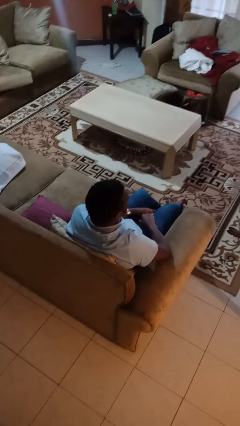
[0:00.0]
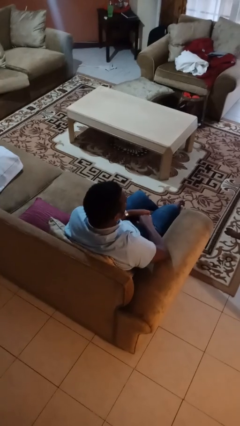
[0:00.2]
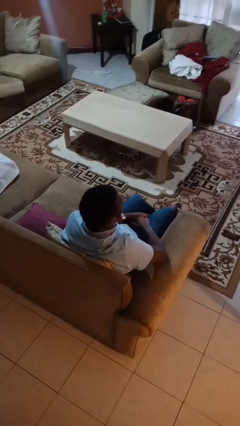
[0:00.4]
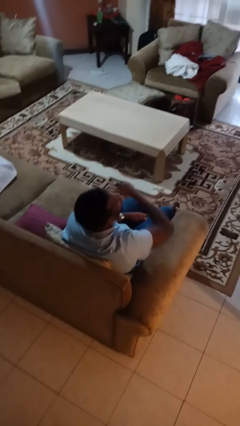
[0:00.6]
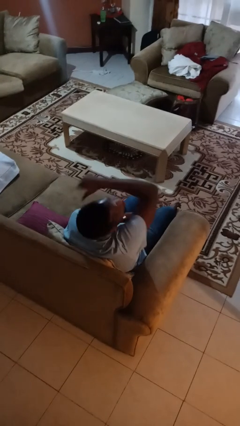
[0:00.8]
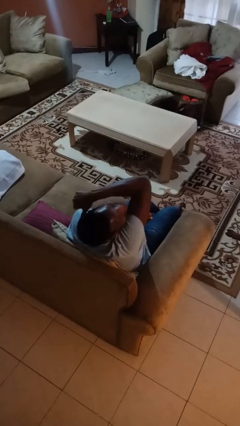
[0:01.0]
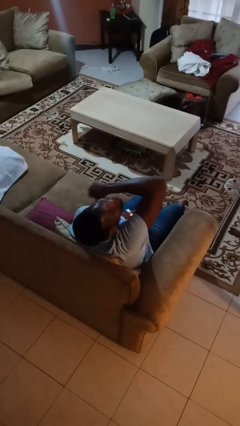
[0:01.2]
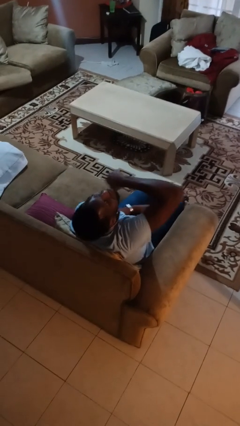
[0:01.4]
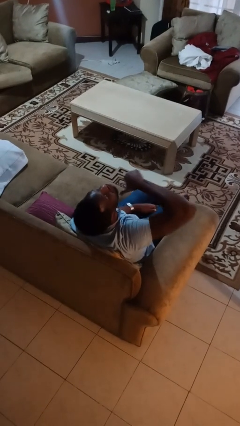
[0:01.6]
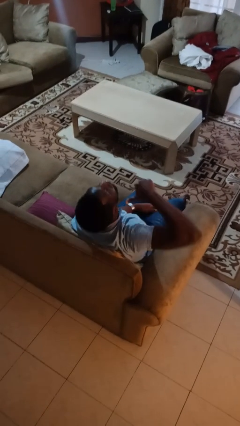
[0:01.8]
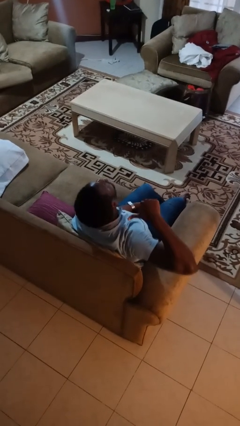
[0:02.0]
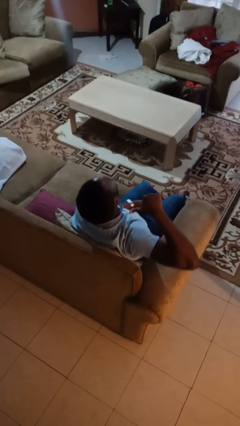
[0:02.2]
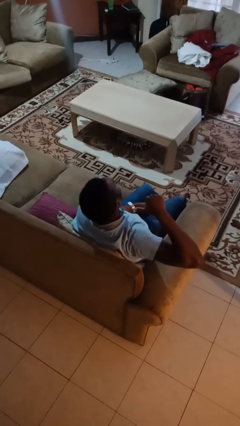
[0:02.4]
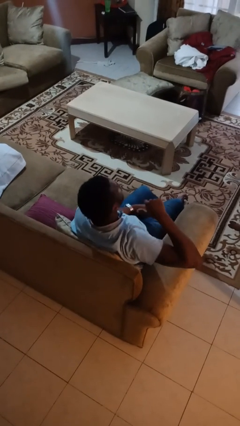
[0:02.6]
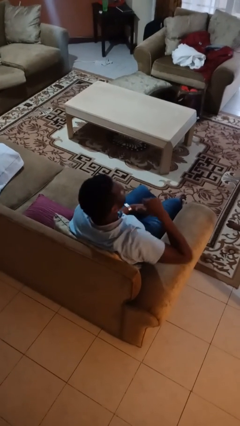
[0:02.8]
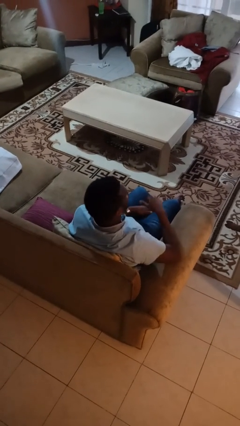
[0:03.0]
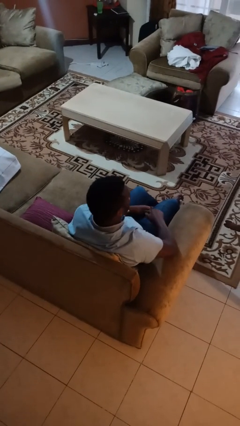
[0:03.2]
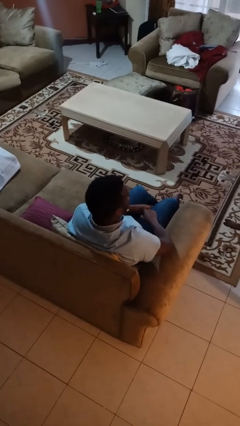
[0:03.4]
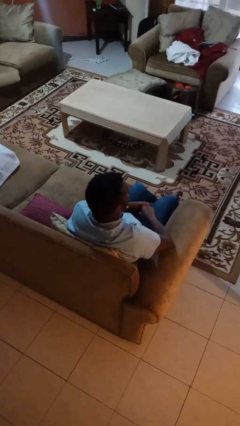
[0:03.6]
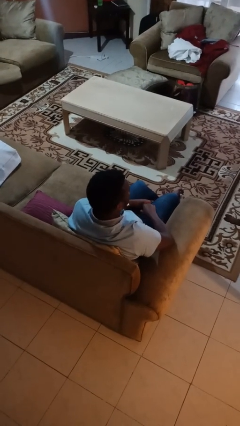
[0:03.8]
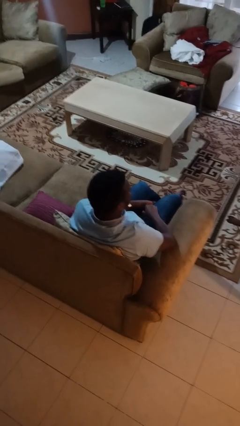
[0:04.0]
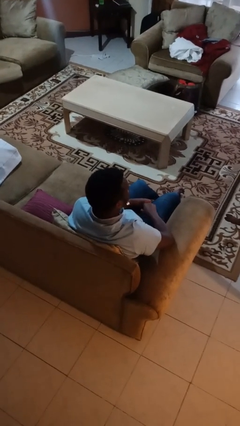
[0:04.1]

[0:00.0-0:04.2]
person gestures cut

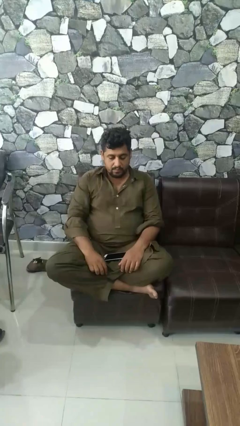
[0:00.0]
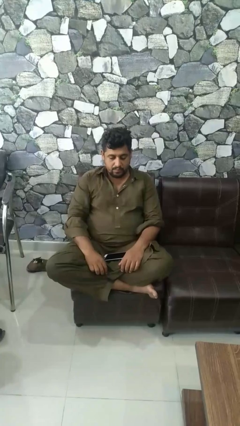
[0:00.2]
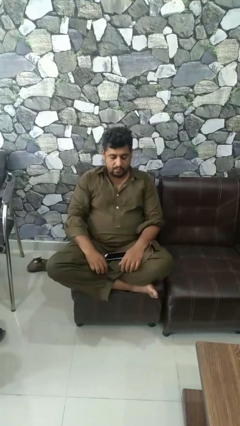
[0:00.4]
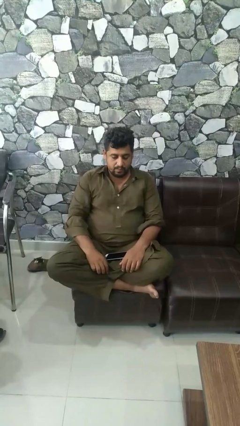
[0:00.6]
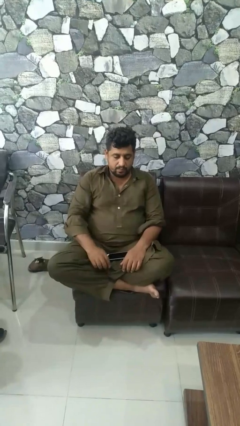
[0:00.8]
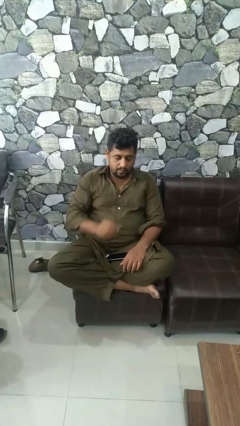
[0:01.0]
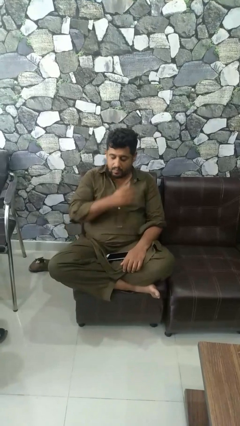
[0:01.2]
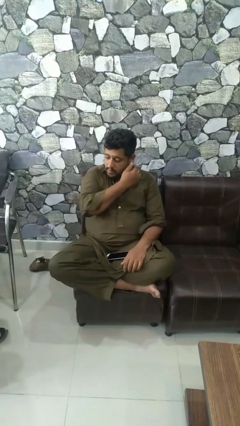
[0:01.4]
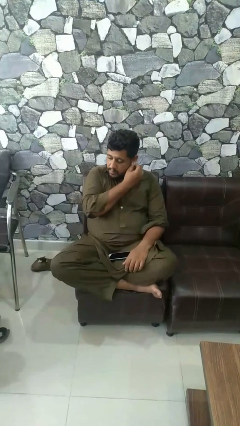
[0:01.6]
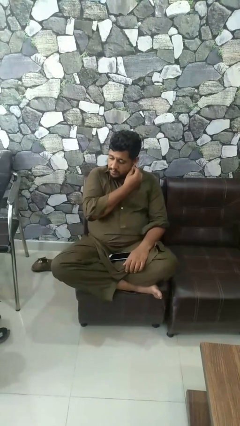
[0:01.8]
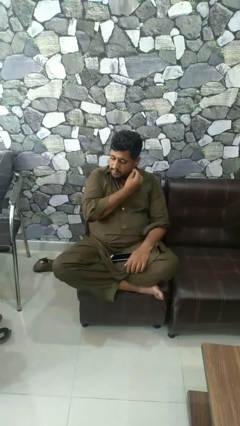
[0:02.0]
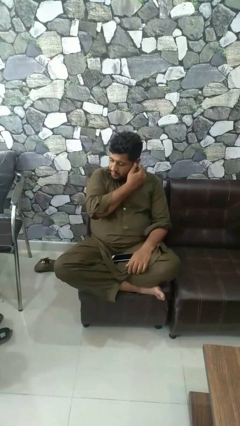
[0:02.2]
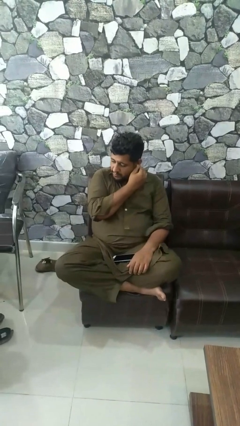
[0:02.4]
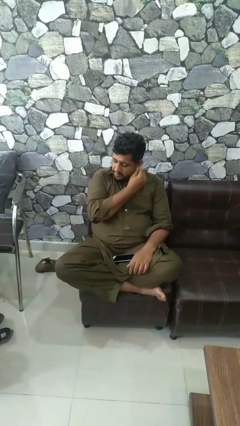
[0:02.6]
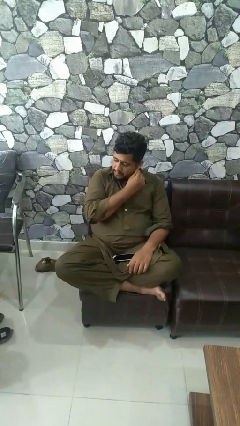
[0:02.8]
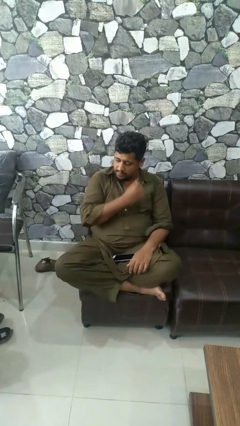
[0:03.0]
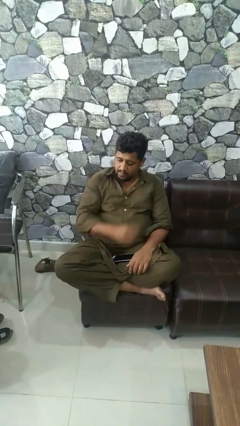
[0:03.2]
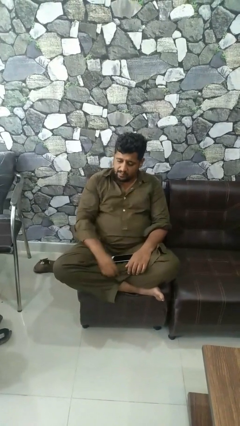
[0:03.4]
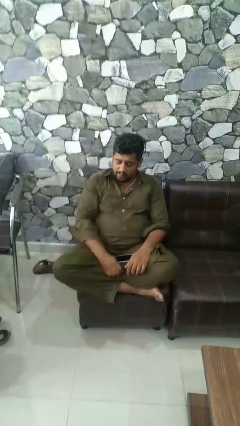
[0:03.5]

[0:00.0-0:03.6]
person touches earlobe

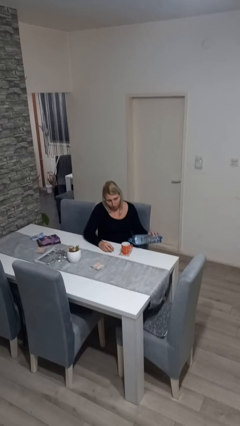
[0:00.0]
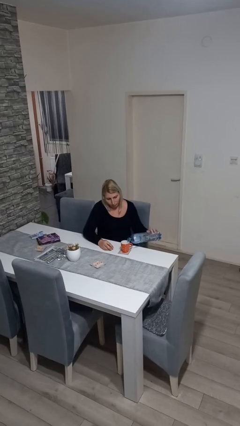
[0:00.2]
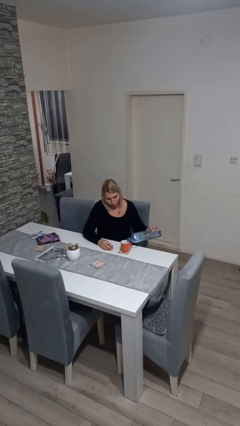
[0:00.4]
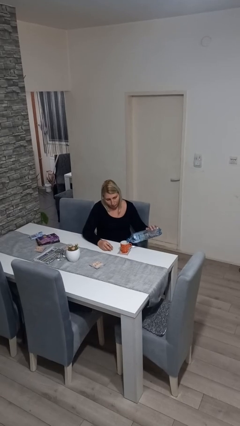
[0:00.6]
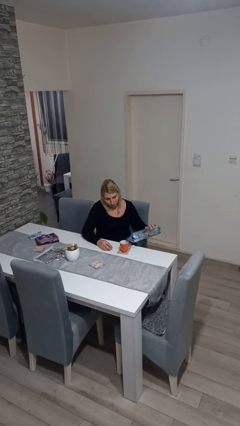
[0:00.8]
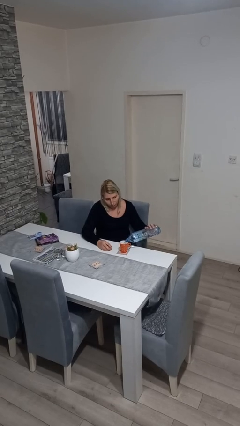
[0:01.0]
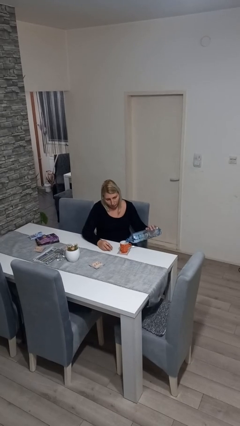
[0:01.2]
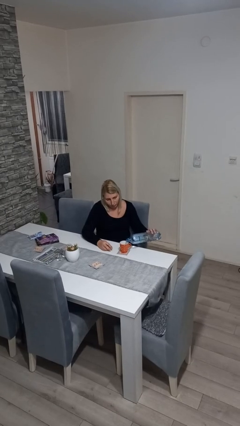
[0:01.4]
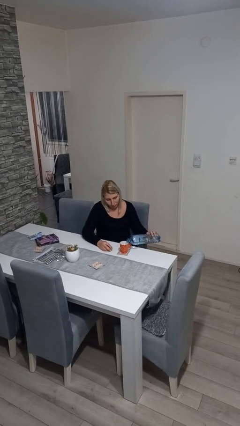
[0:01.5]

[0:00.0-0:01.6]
person pours liquid into cup

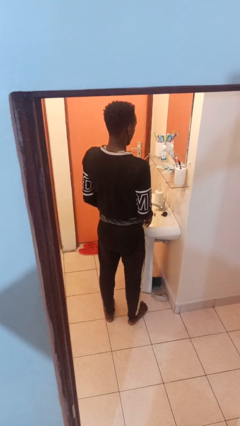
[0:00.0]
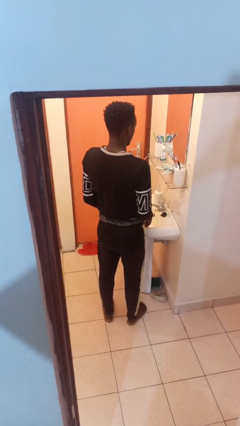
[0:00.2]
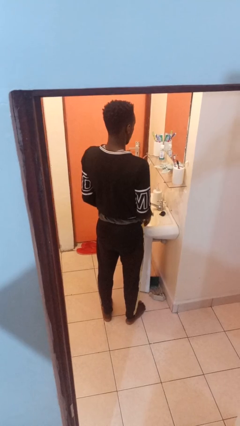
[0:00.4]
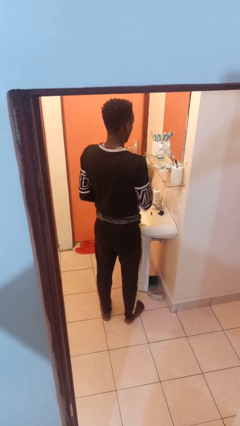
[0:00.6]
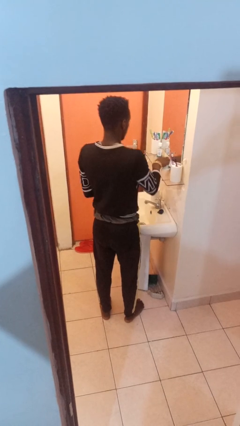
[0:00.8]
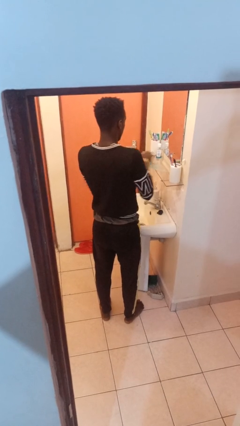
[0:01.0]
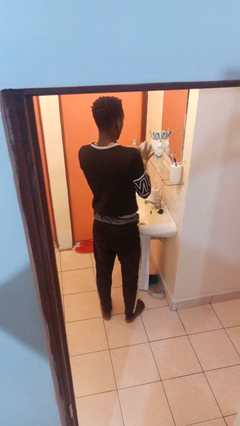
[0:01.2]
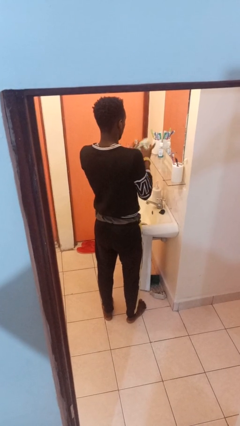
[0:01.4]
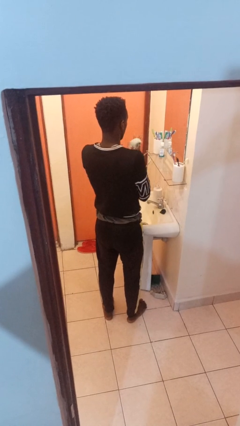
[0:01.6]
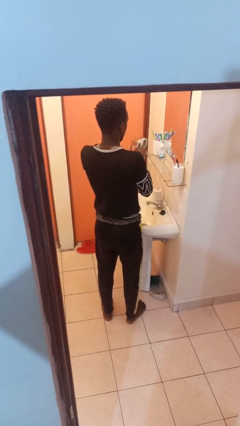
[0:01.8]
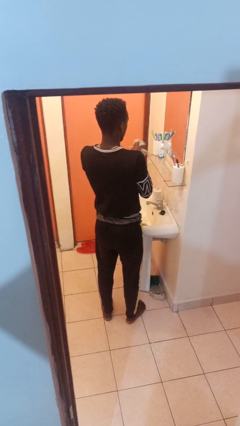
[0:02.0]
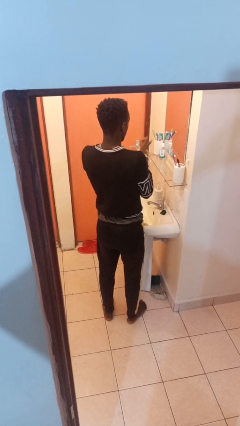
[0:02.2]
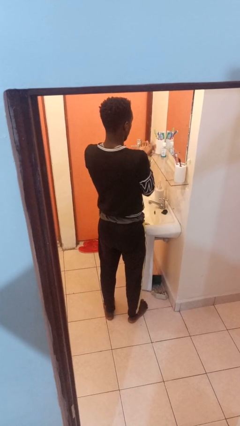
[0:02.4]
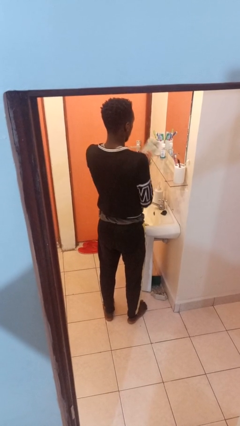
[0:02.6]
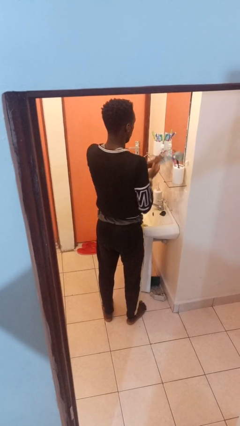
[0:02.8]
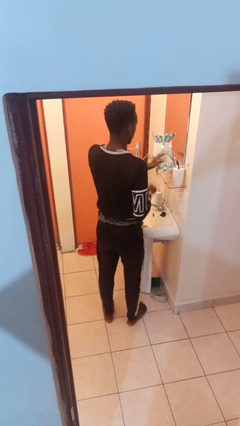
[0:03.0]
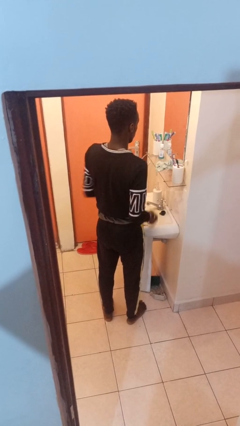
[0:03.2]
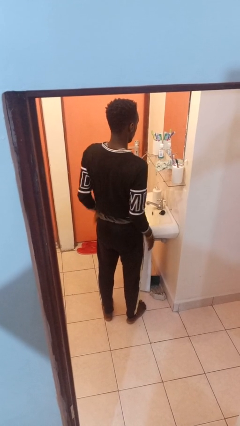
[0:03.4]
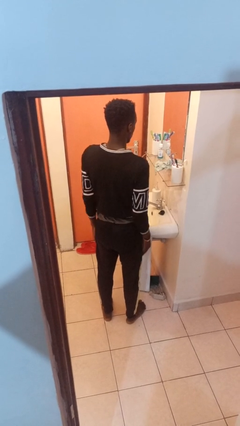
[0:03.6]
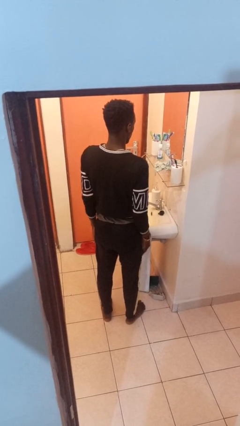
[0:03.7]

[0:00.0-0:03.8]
person dries hands with towel

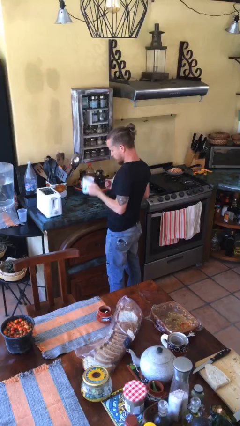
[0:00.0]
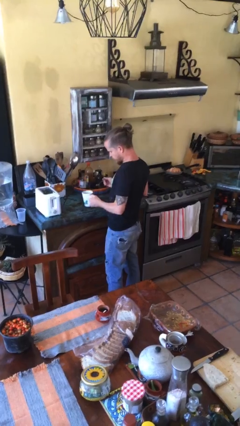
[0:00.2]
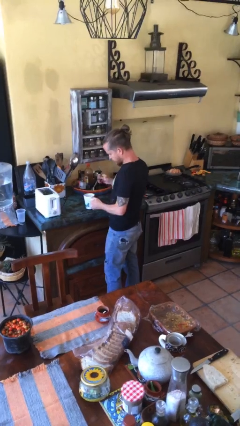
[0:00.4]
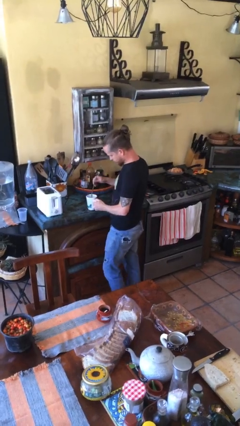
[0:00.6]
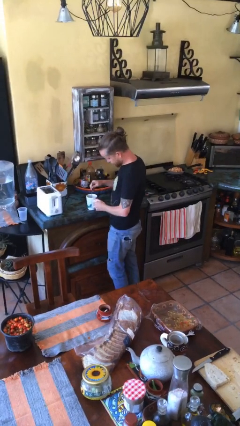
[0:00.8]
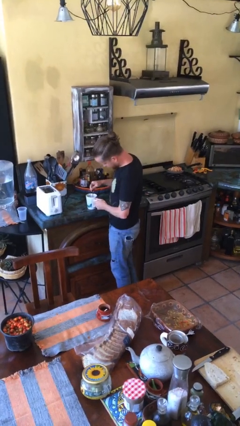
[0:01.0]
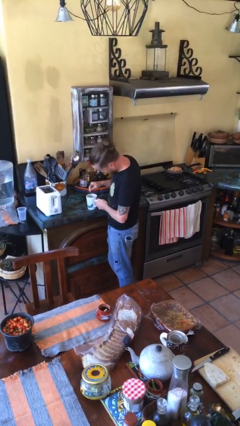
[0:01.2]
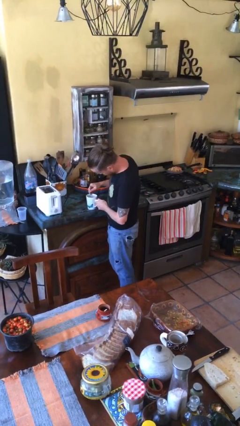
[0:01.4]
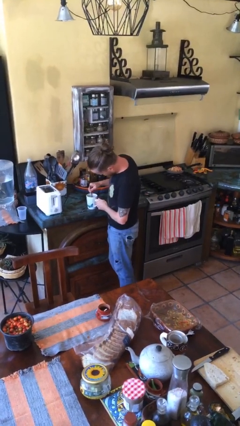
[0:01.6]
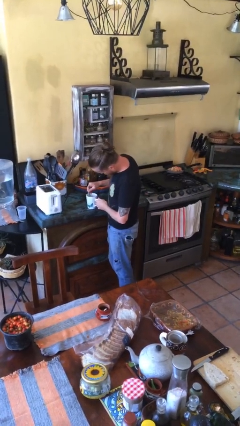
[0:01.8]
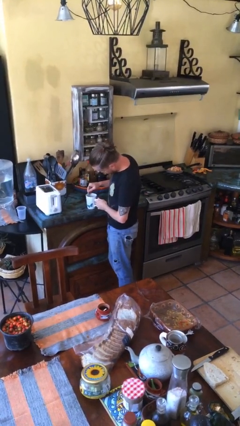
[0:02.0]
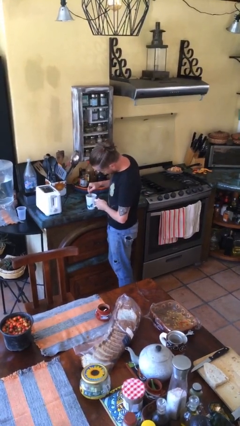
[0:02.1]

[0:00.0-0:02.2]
person stirs mug

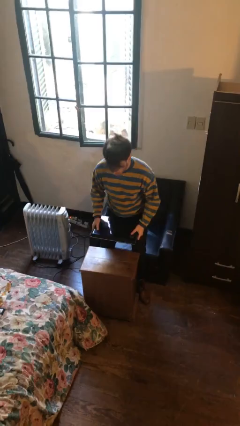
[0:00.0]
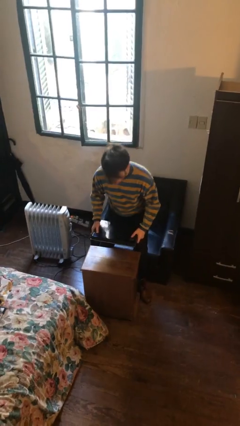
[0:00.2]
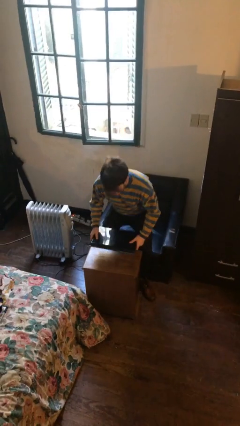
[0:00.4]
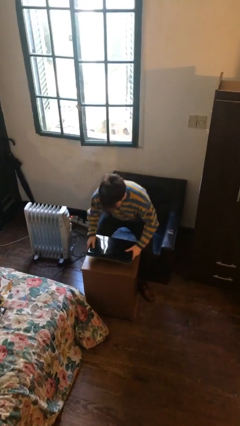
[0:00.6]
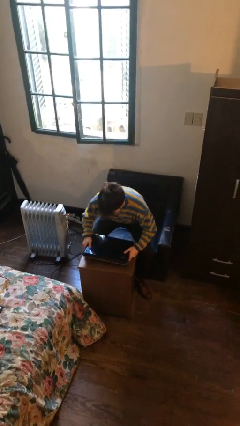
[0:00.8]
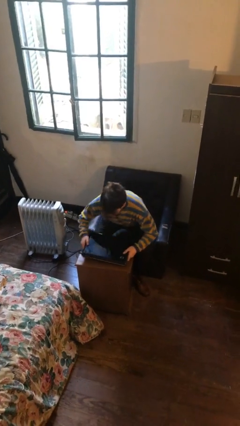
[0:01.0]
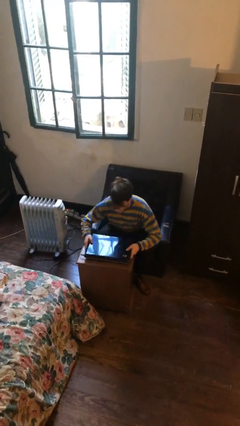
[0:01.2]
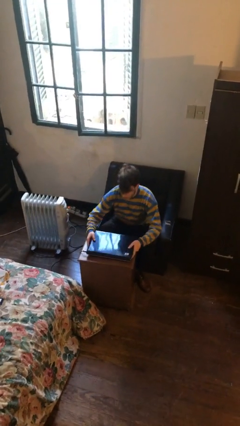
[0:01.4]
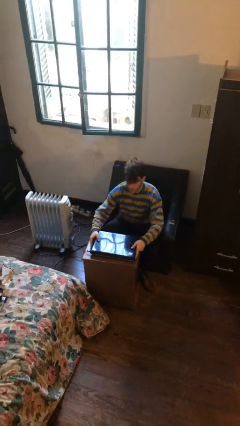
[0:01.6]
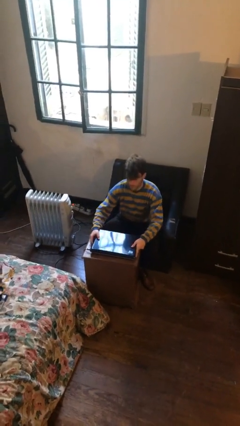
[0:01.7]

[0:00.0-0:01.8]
person sits down
